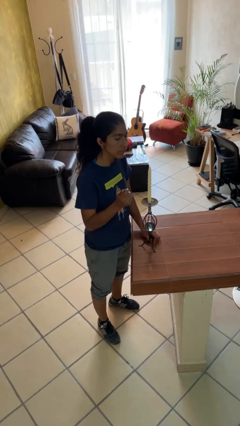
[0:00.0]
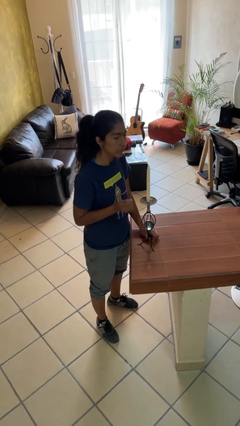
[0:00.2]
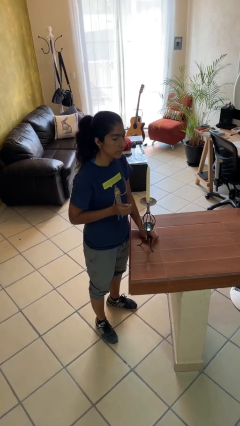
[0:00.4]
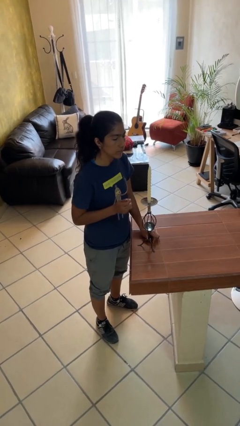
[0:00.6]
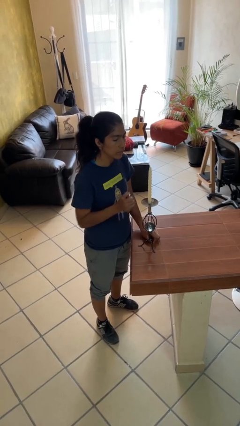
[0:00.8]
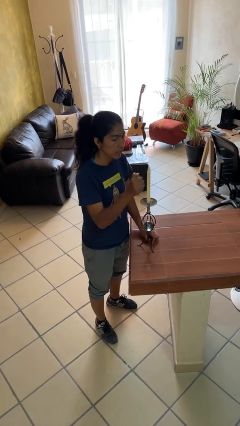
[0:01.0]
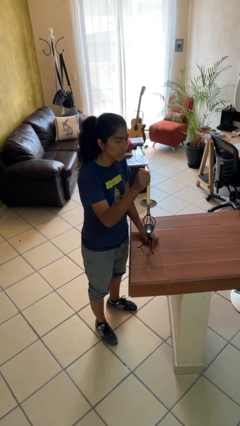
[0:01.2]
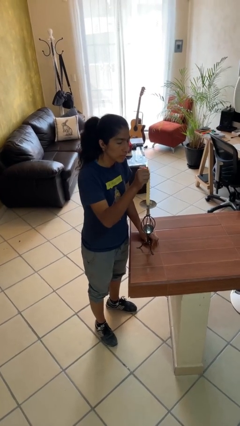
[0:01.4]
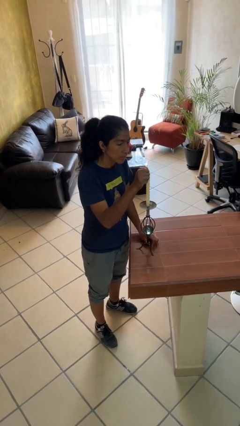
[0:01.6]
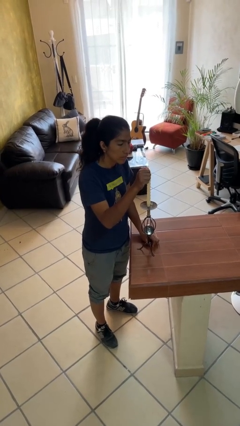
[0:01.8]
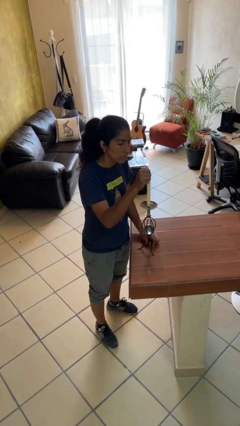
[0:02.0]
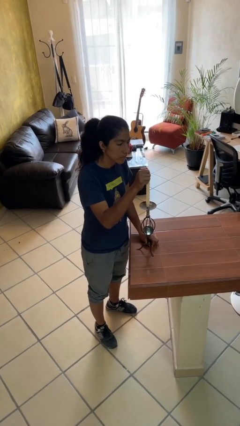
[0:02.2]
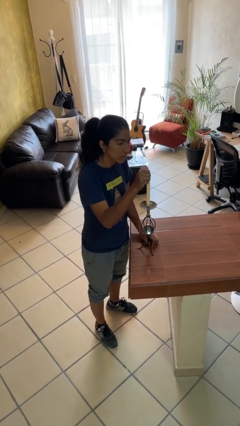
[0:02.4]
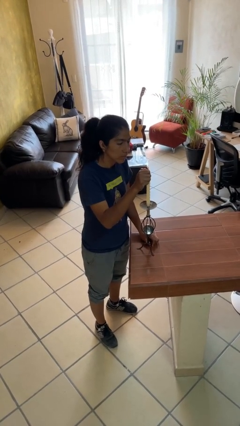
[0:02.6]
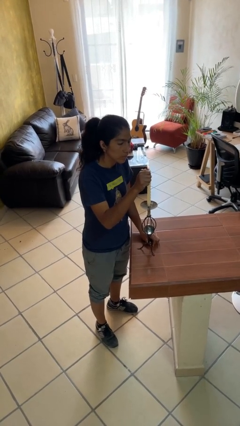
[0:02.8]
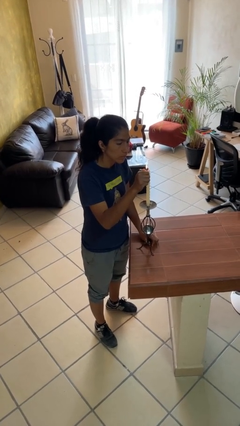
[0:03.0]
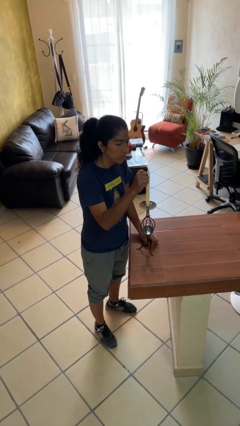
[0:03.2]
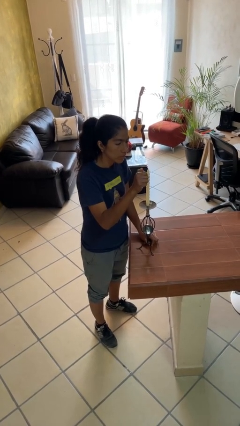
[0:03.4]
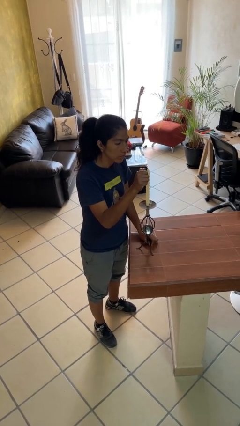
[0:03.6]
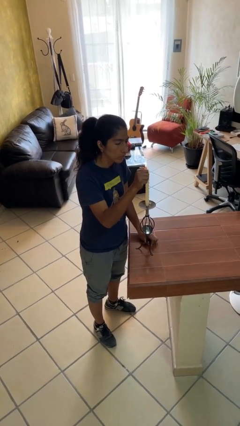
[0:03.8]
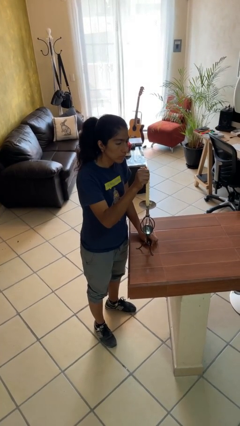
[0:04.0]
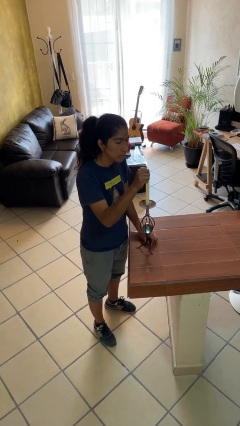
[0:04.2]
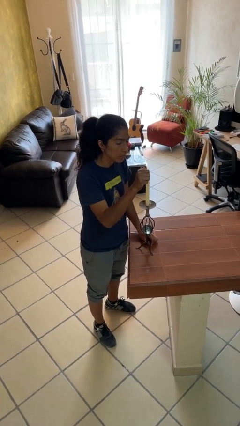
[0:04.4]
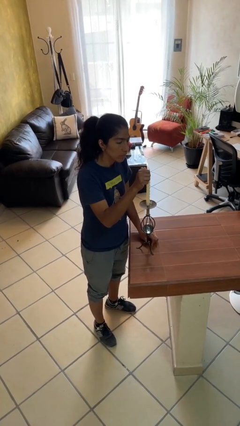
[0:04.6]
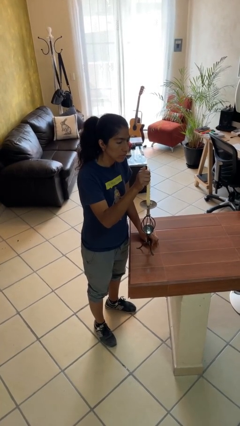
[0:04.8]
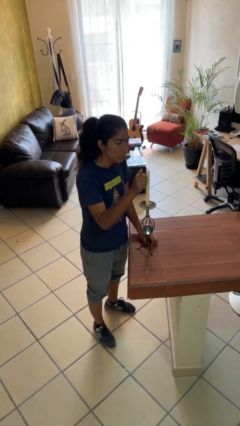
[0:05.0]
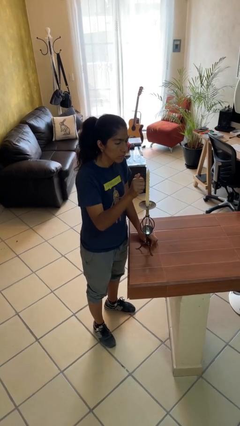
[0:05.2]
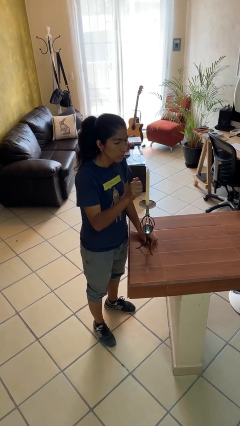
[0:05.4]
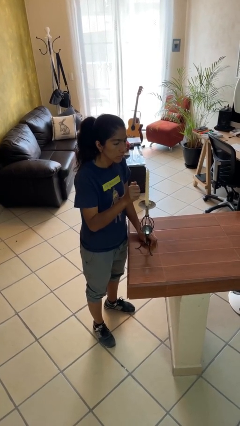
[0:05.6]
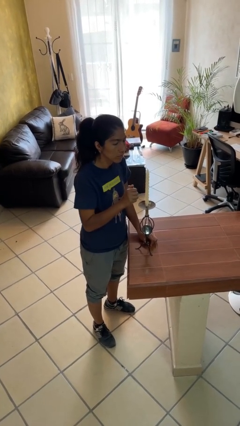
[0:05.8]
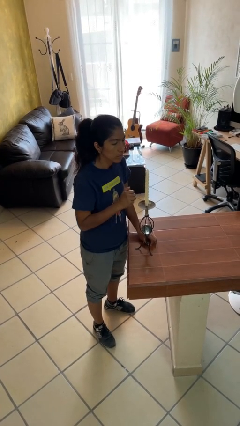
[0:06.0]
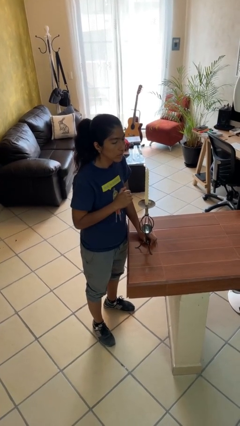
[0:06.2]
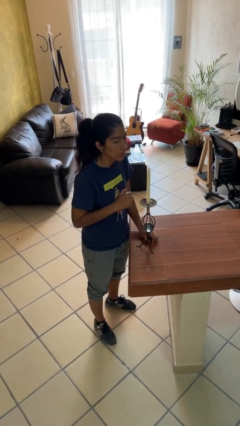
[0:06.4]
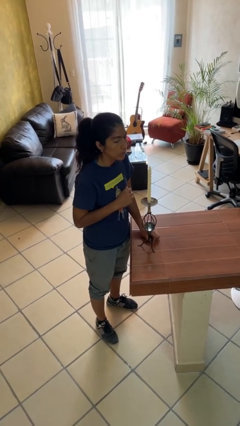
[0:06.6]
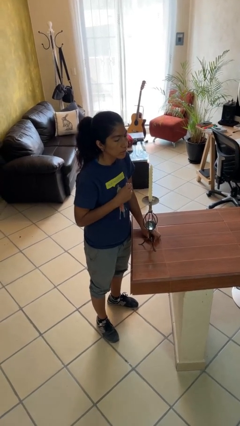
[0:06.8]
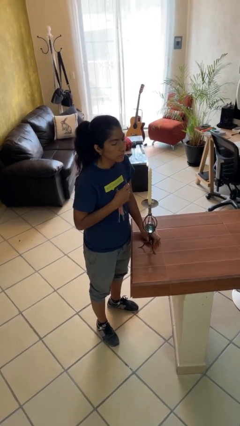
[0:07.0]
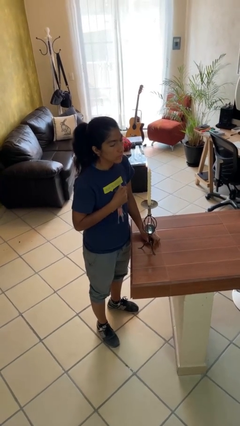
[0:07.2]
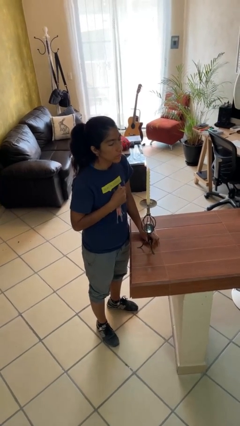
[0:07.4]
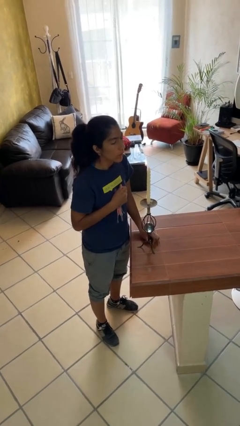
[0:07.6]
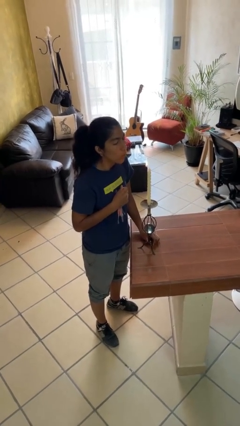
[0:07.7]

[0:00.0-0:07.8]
person lights candle

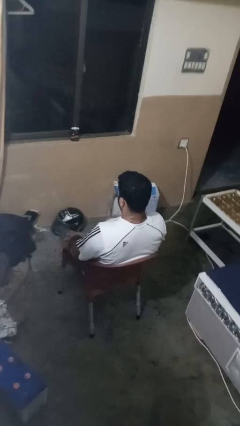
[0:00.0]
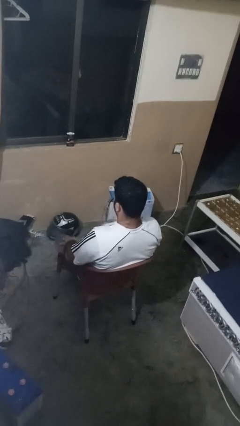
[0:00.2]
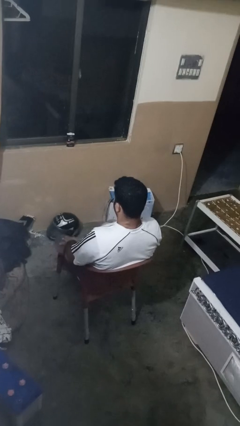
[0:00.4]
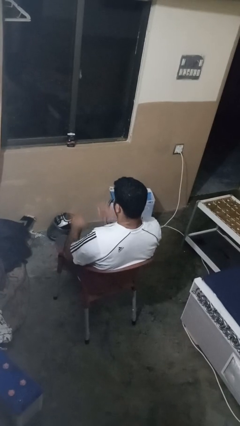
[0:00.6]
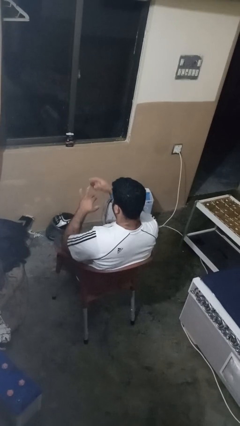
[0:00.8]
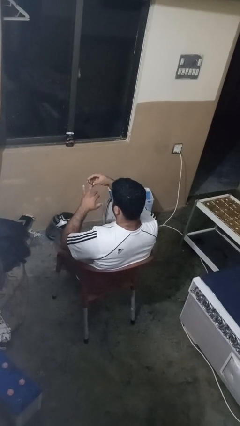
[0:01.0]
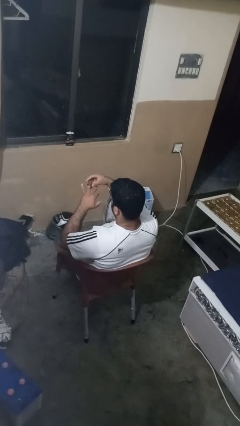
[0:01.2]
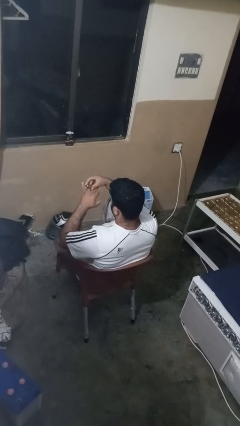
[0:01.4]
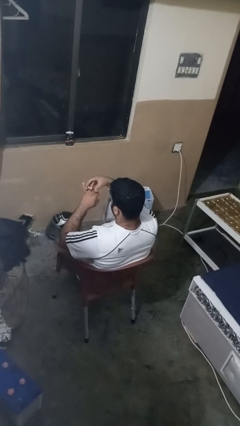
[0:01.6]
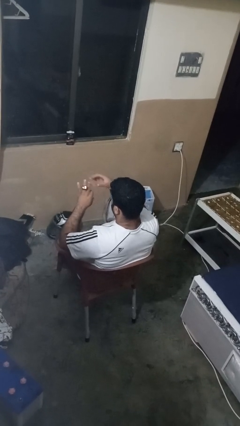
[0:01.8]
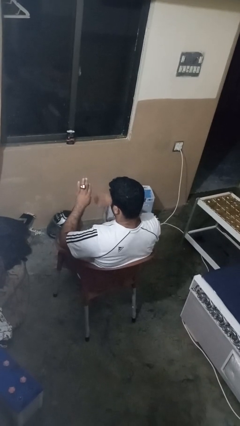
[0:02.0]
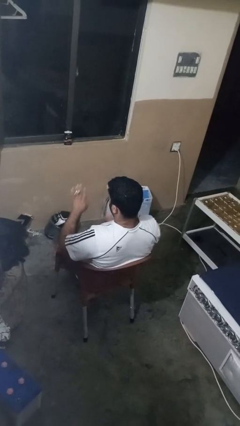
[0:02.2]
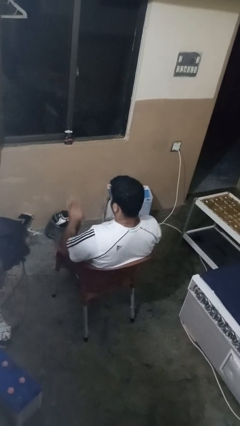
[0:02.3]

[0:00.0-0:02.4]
person puts on ring

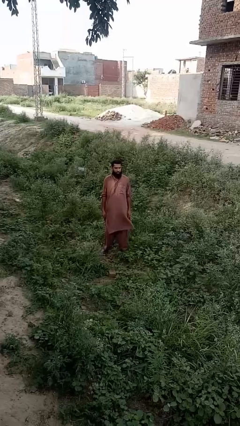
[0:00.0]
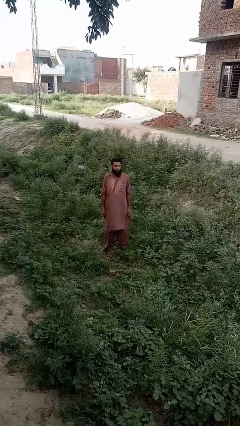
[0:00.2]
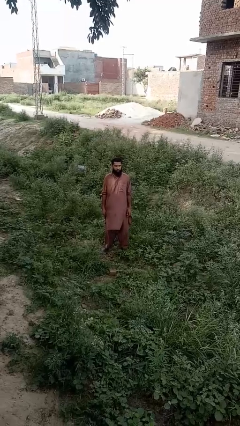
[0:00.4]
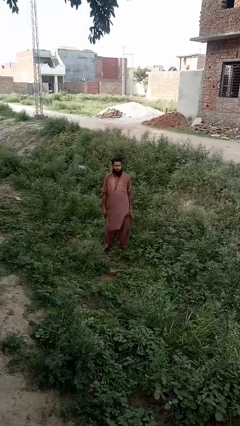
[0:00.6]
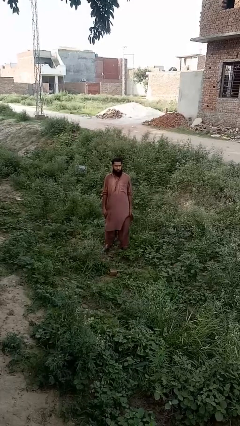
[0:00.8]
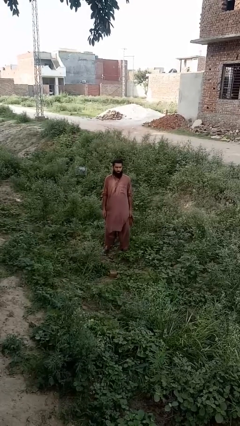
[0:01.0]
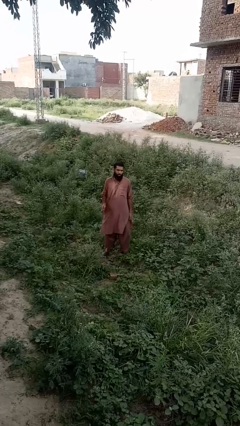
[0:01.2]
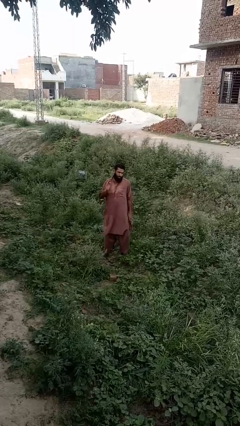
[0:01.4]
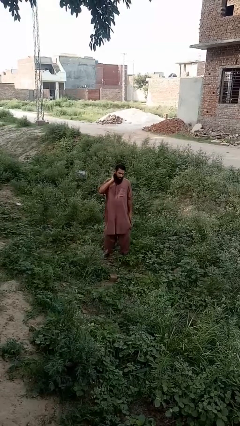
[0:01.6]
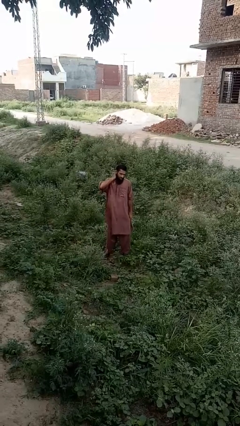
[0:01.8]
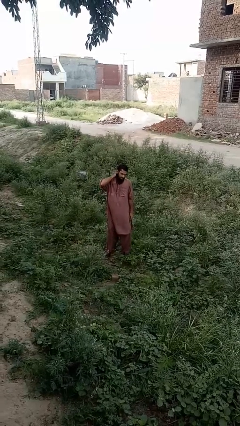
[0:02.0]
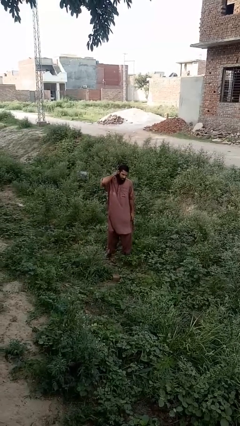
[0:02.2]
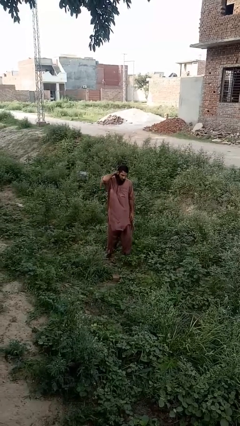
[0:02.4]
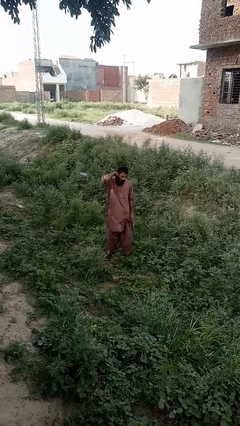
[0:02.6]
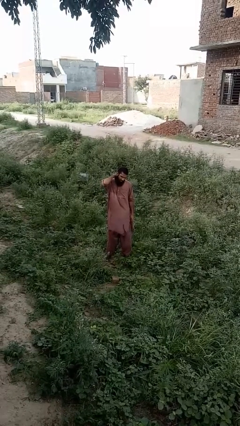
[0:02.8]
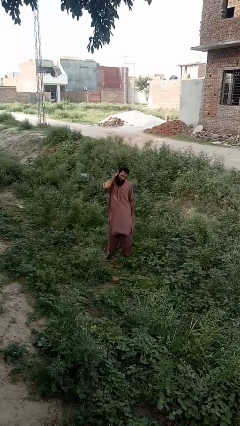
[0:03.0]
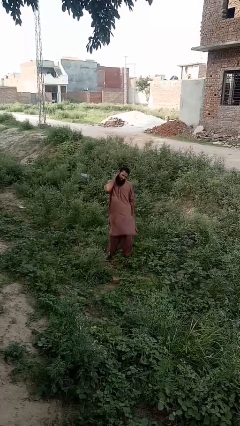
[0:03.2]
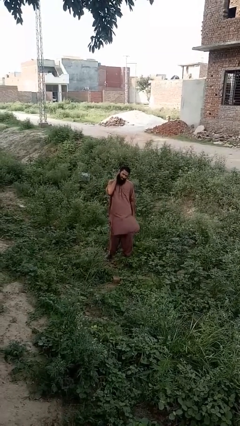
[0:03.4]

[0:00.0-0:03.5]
person rubs neck

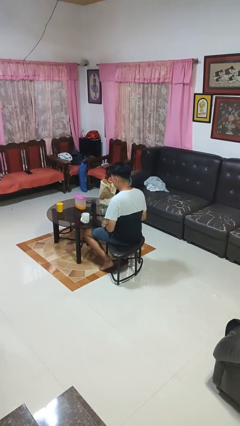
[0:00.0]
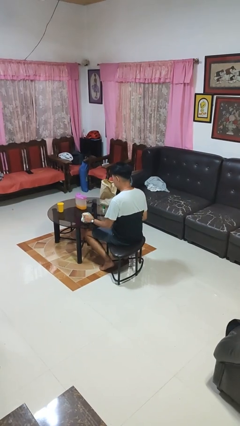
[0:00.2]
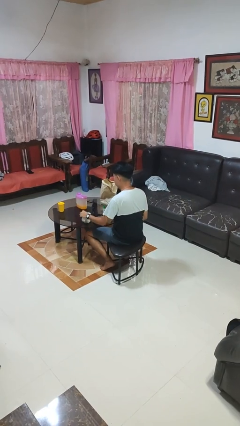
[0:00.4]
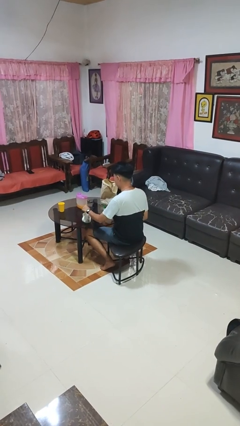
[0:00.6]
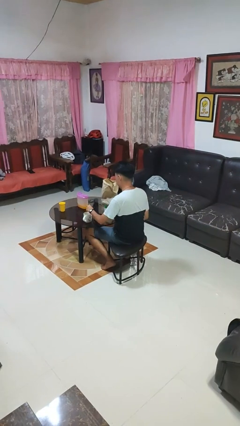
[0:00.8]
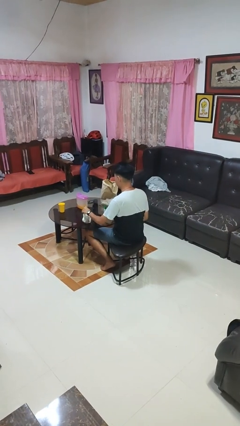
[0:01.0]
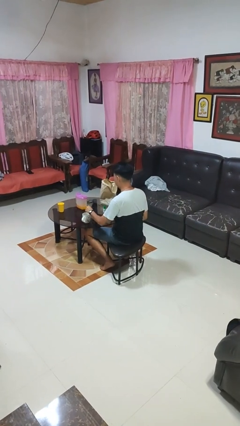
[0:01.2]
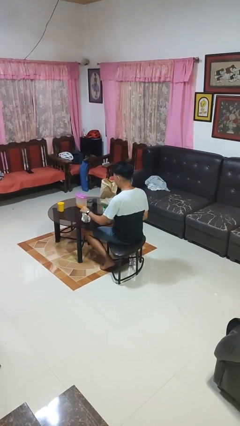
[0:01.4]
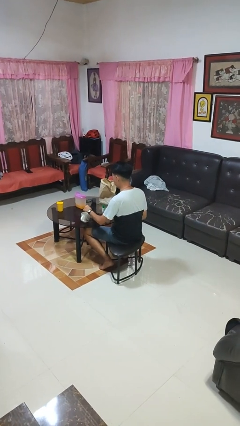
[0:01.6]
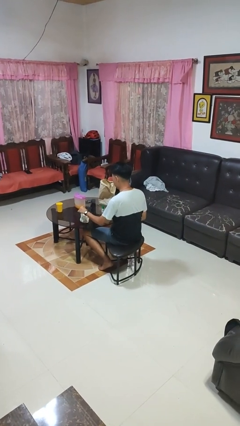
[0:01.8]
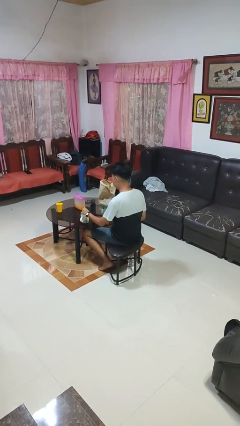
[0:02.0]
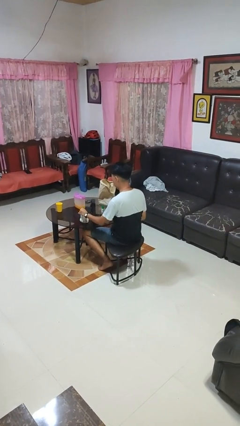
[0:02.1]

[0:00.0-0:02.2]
person stirs mug

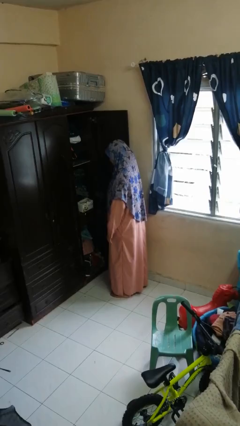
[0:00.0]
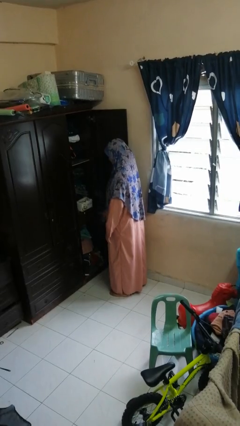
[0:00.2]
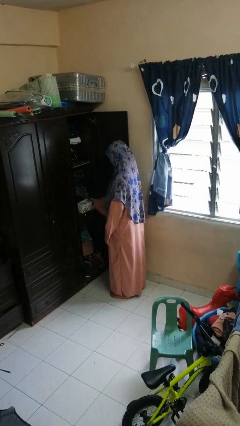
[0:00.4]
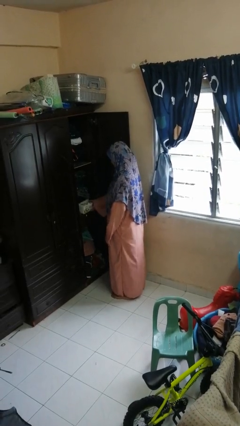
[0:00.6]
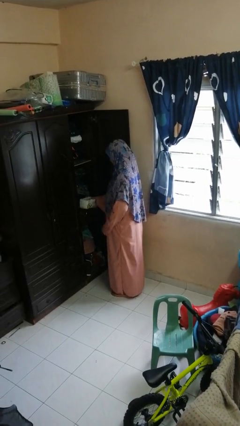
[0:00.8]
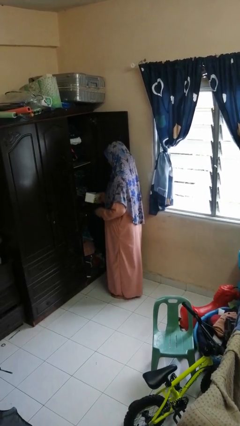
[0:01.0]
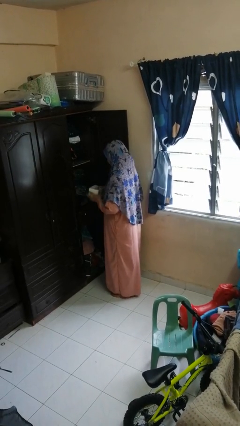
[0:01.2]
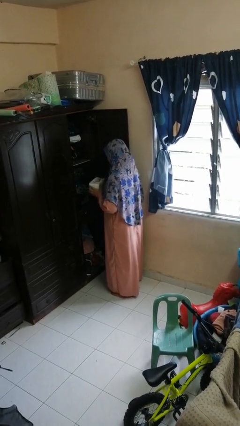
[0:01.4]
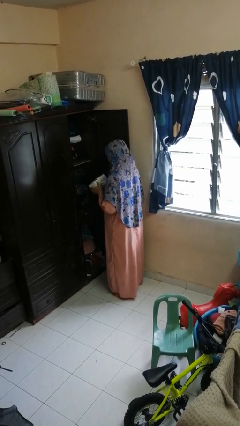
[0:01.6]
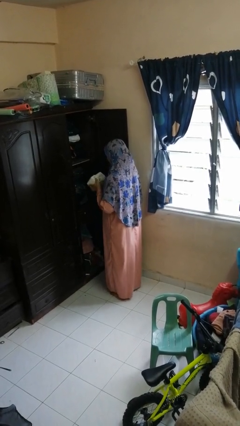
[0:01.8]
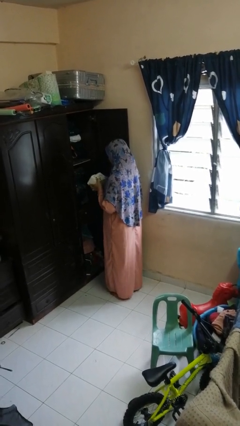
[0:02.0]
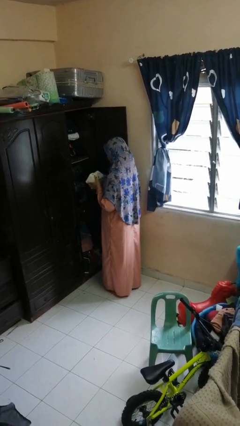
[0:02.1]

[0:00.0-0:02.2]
person picks up object from cabinet
